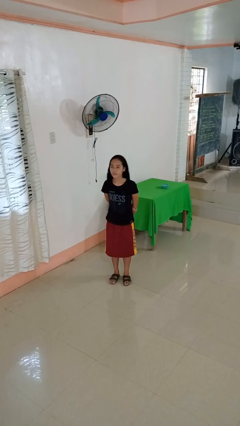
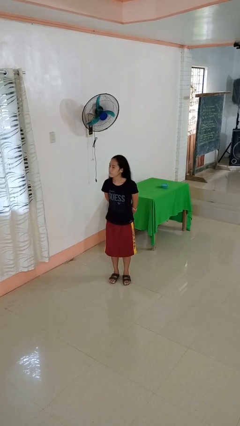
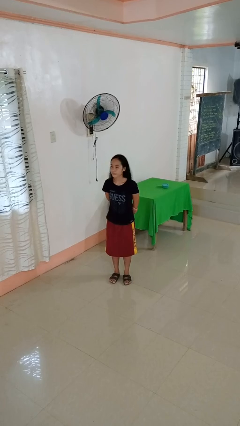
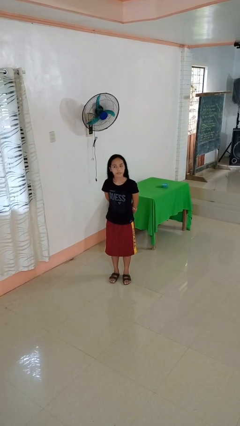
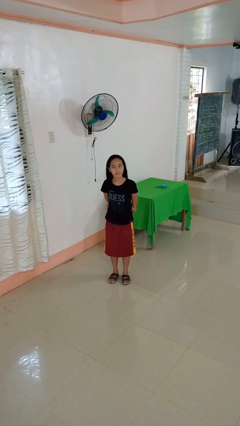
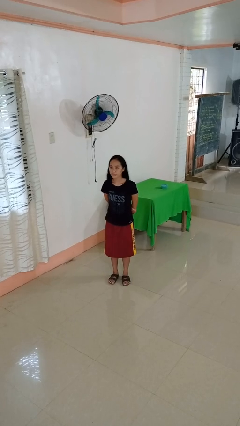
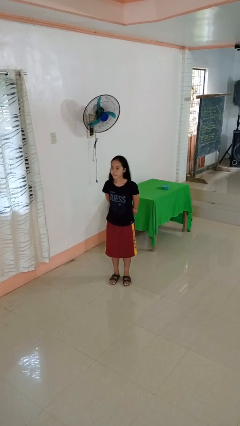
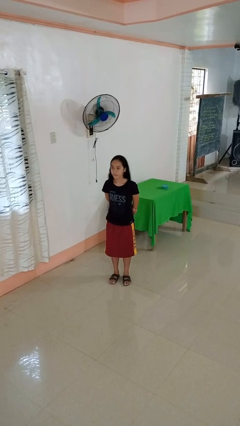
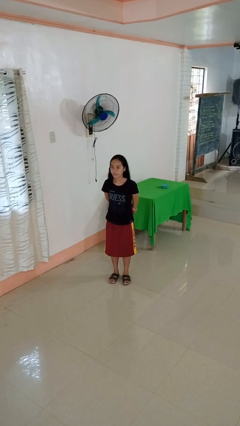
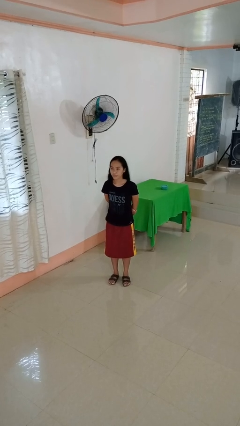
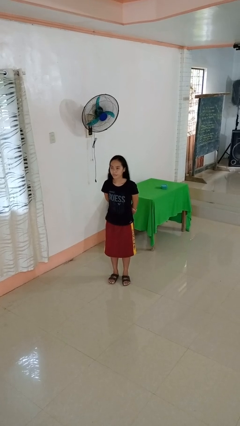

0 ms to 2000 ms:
person shakes head

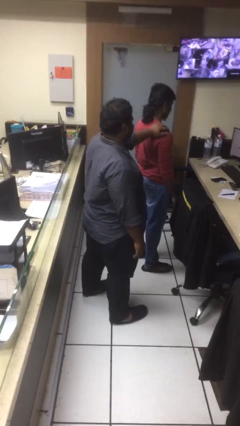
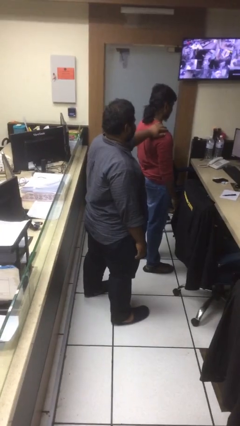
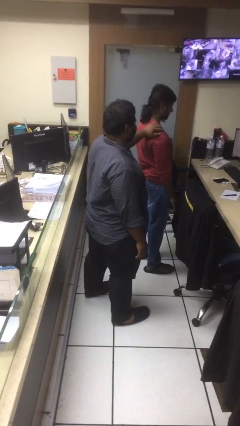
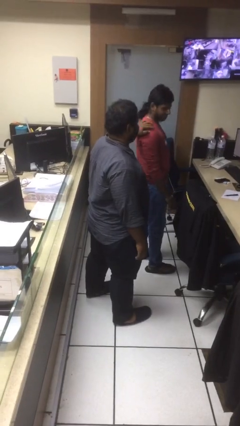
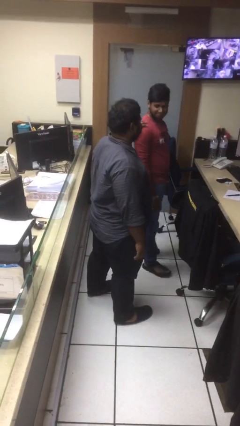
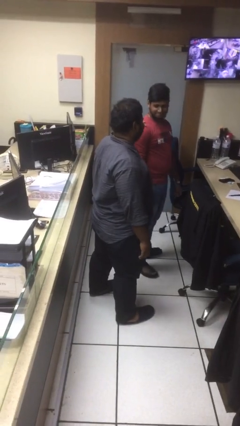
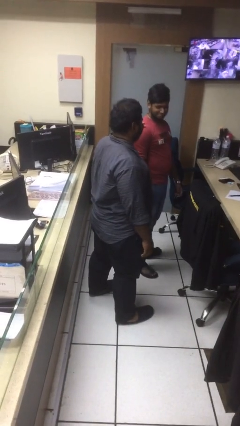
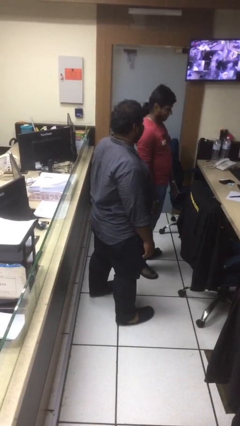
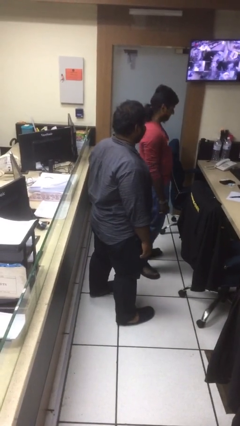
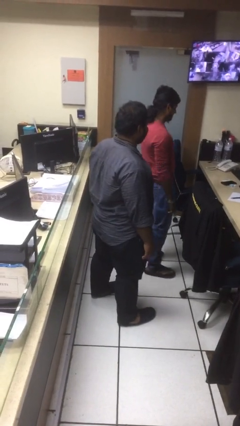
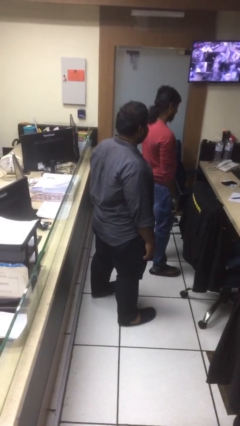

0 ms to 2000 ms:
person spins person around

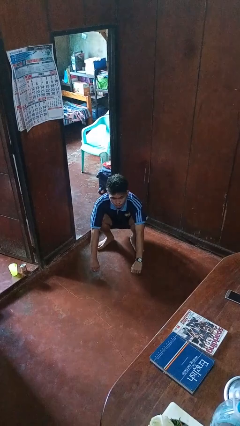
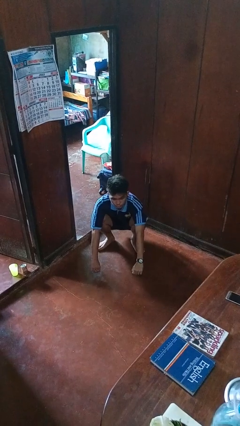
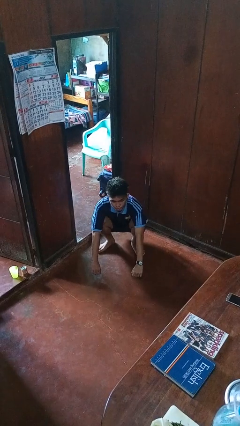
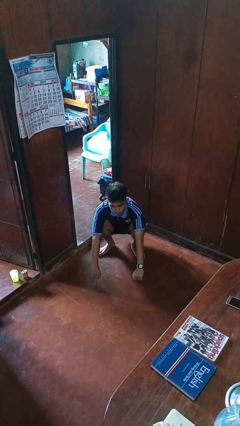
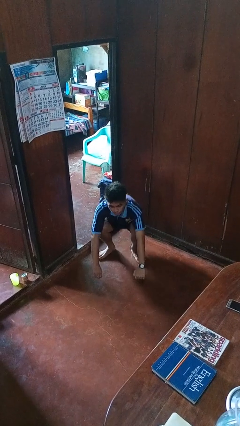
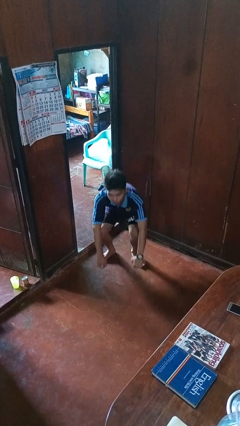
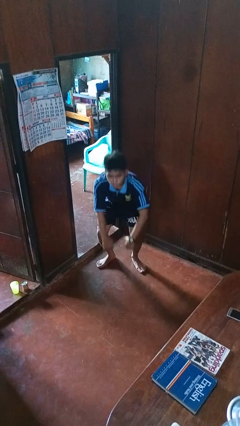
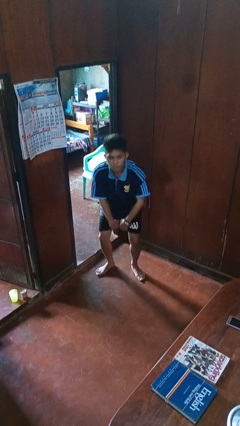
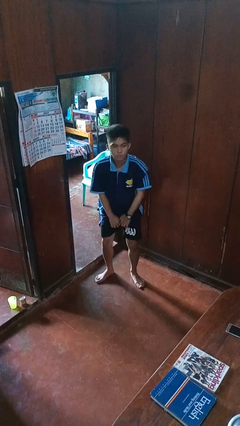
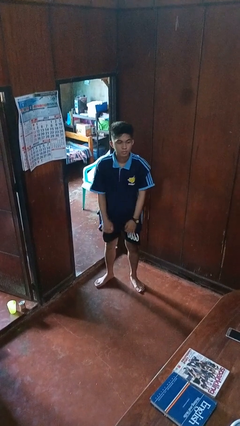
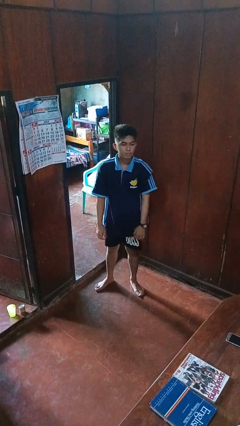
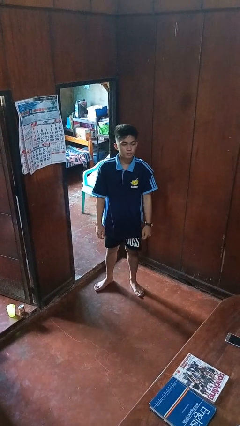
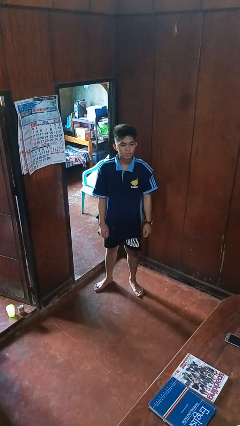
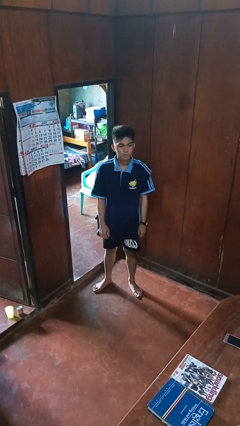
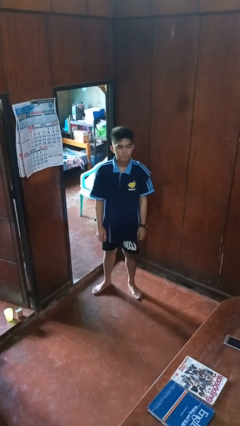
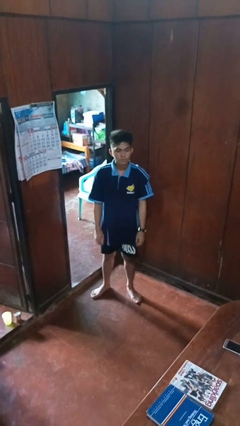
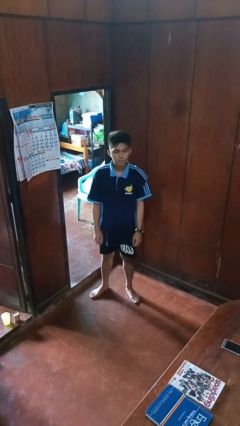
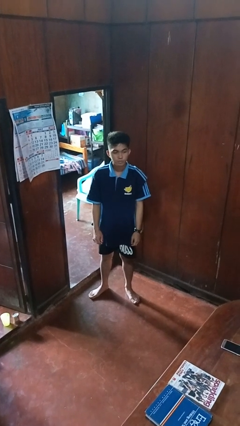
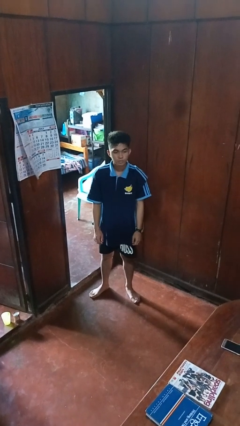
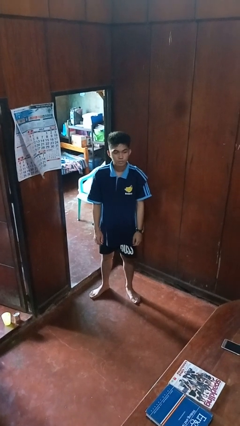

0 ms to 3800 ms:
person stands up

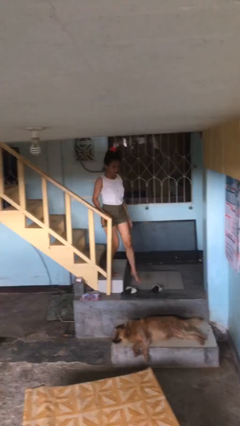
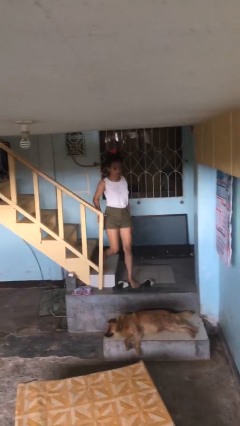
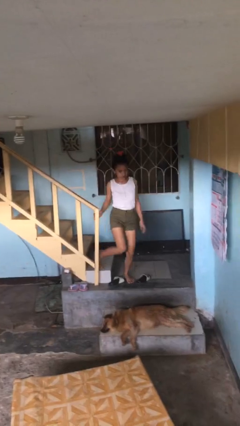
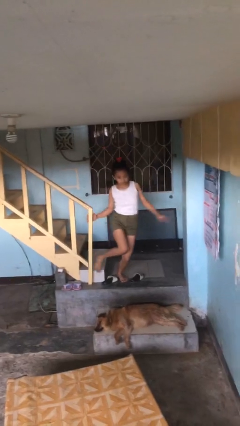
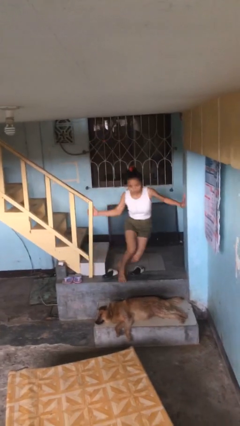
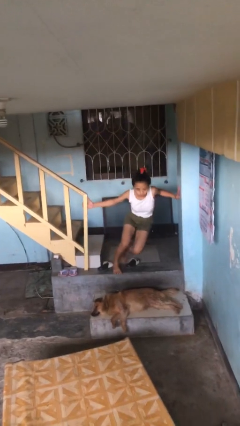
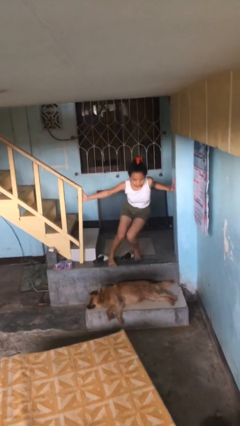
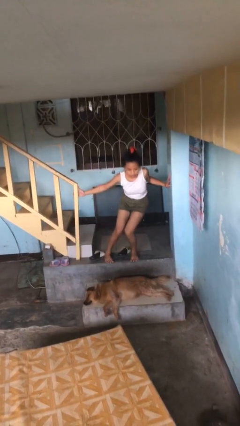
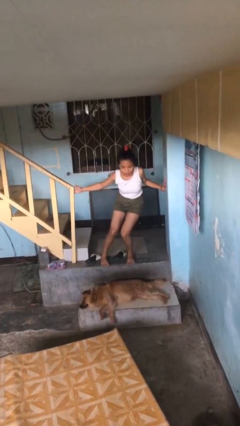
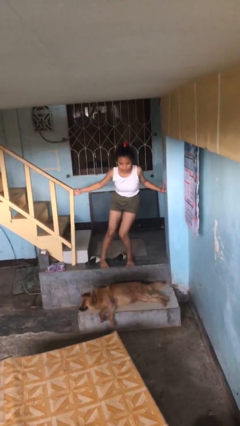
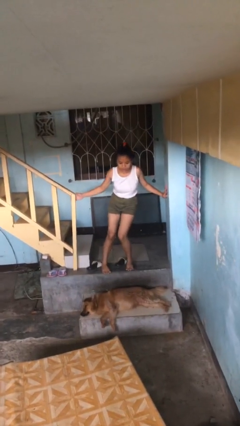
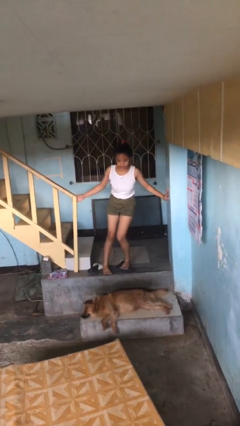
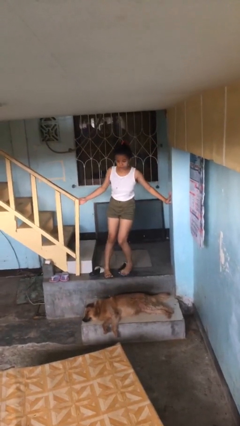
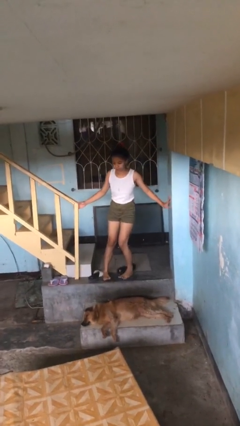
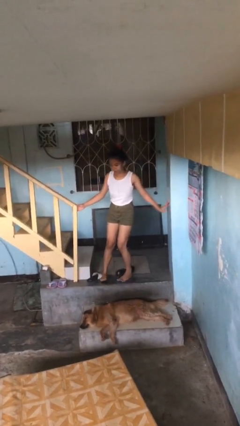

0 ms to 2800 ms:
person trips on stair

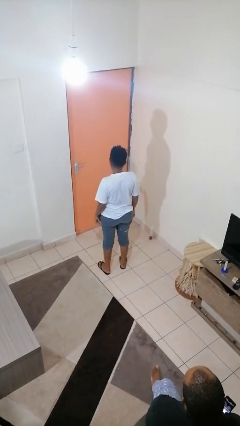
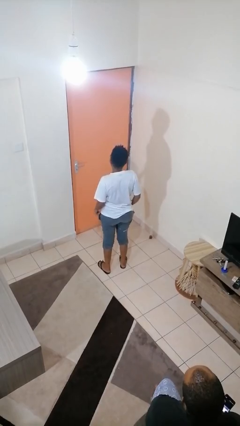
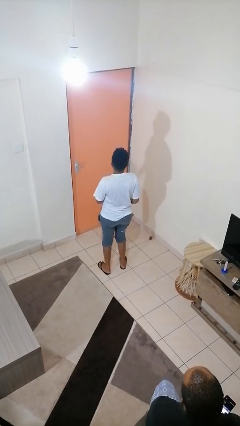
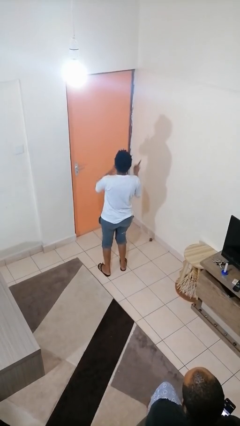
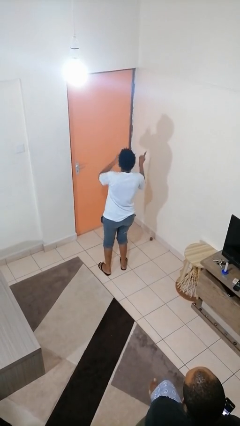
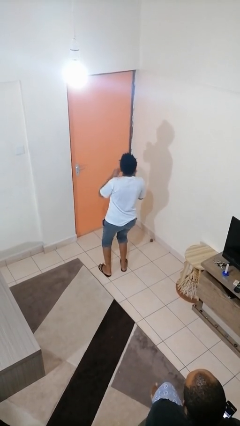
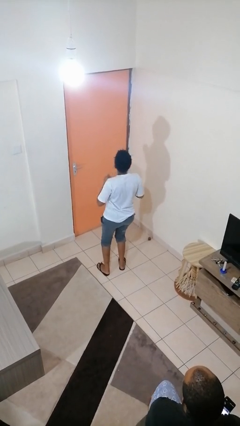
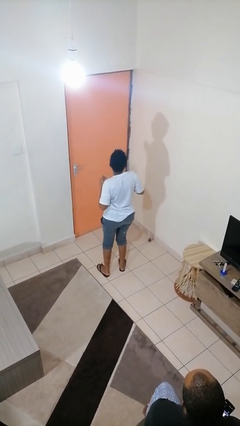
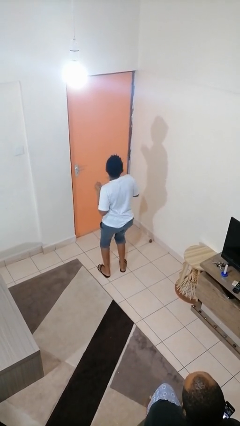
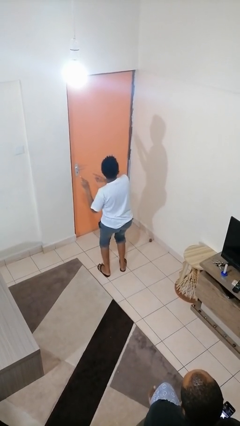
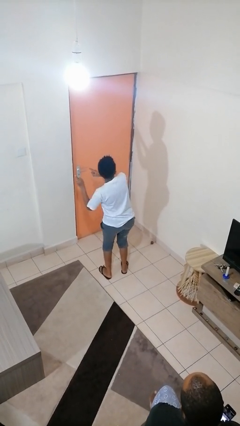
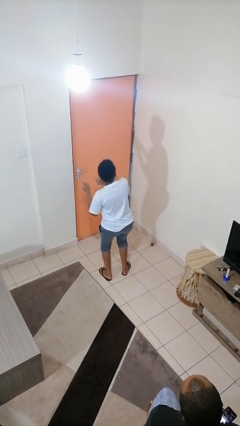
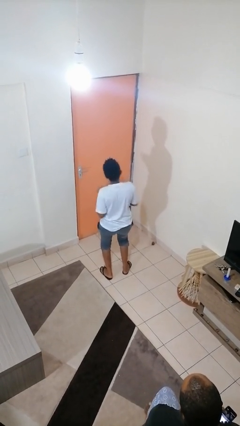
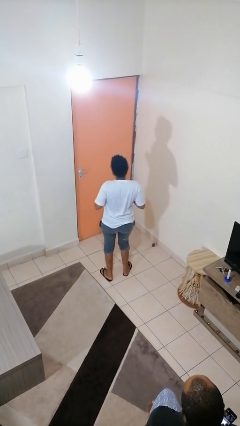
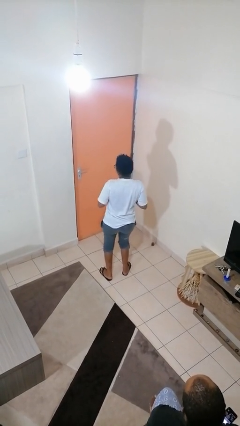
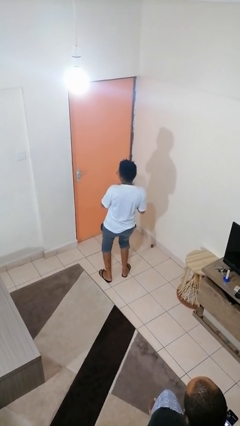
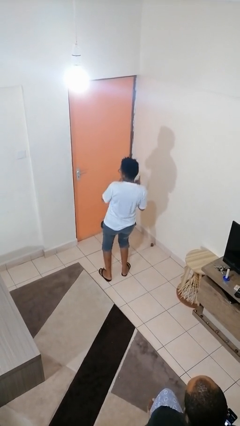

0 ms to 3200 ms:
person dances in place

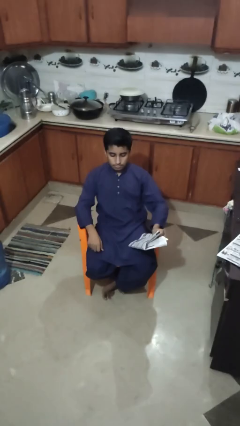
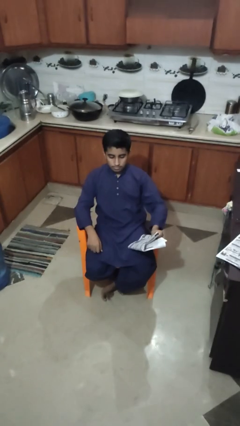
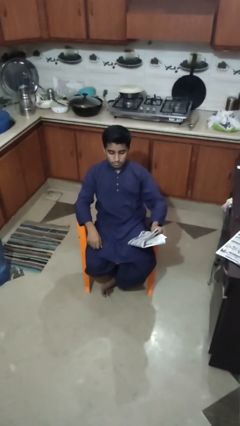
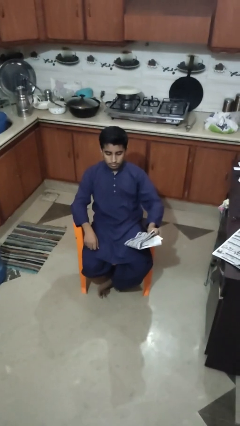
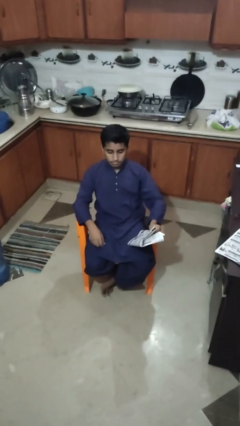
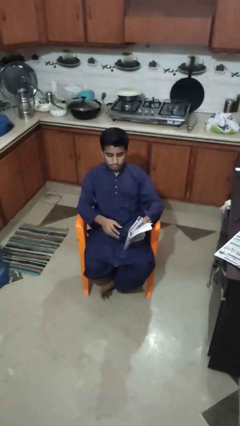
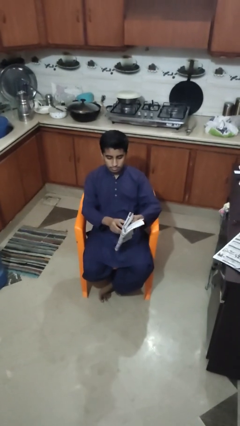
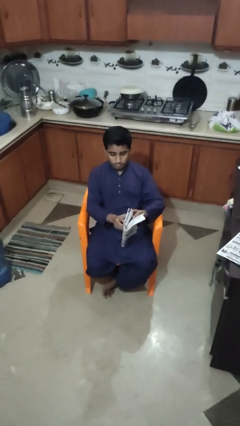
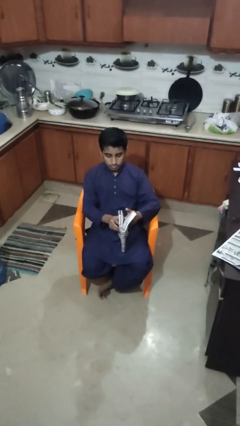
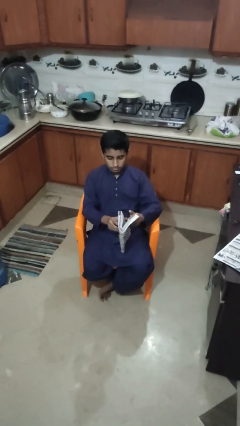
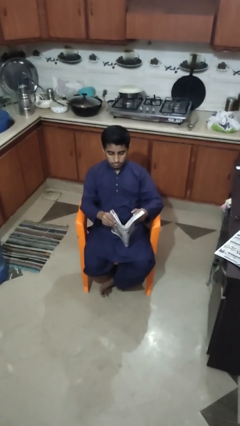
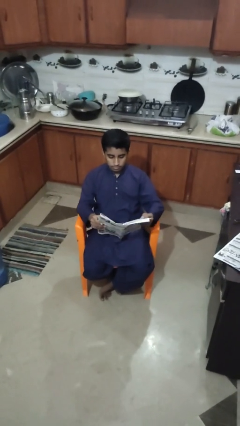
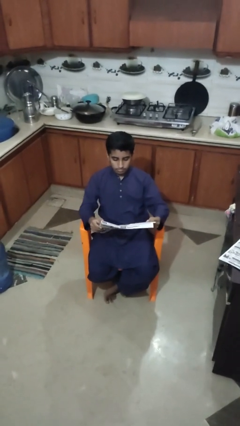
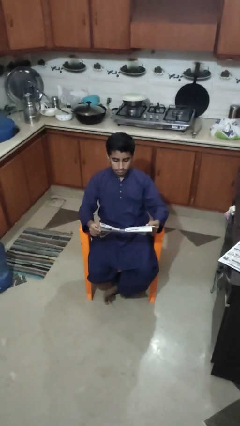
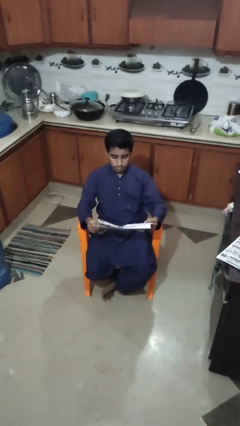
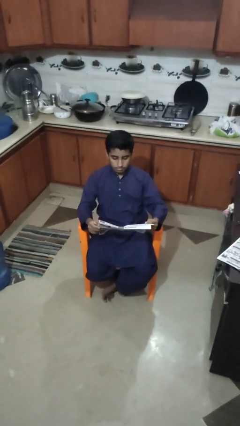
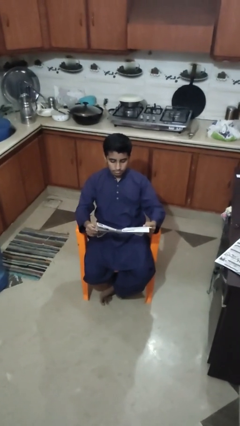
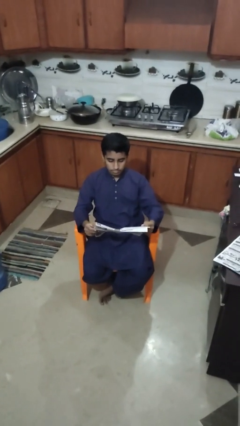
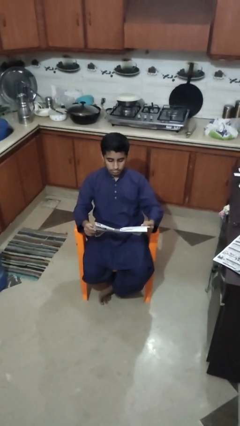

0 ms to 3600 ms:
person reads newspaper

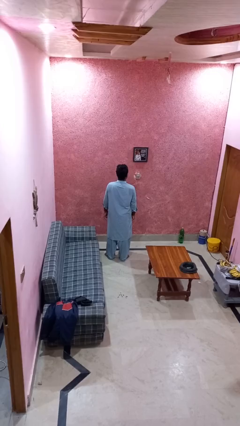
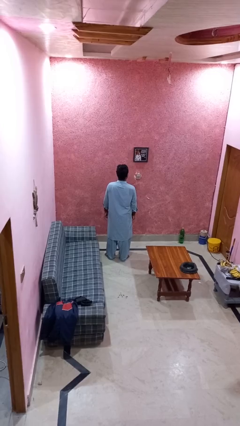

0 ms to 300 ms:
person gestures hang loose
